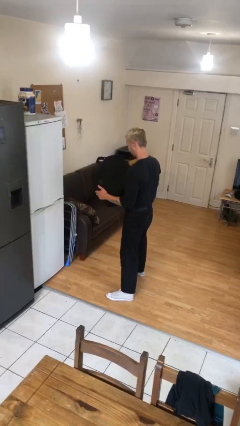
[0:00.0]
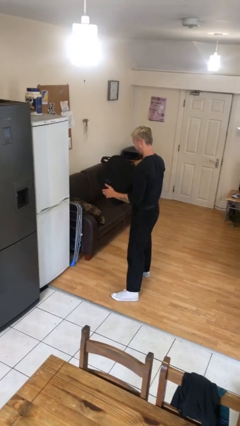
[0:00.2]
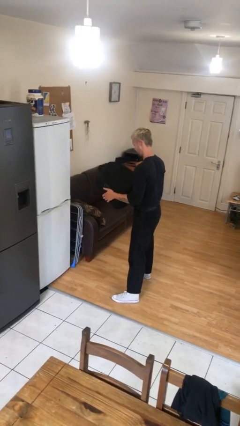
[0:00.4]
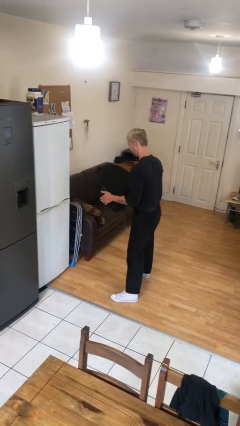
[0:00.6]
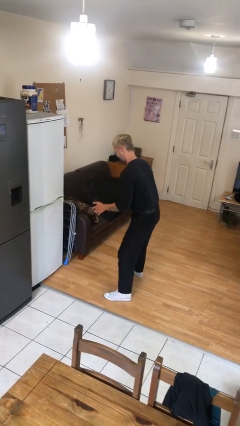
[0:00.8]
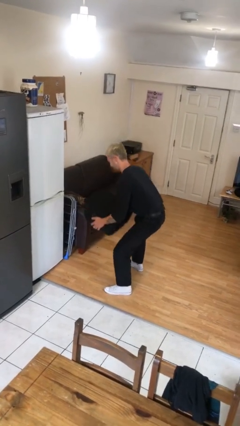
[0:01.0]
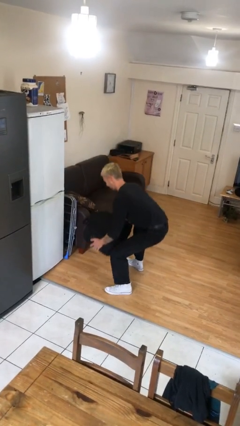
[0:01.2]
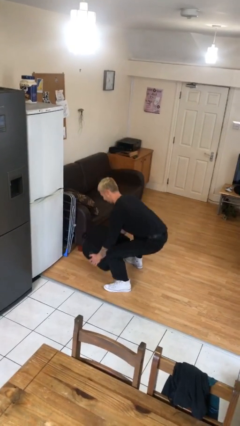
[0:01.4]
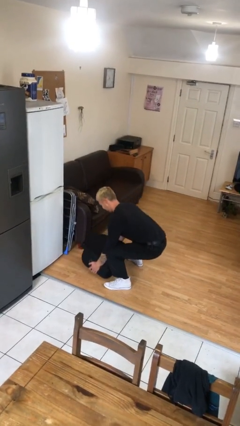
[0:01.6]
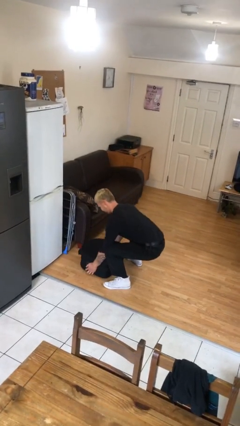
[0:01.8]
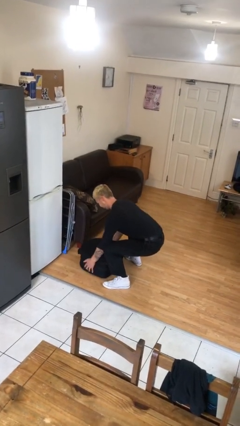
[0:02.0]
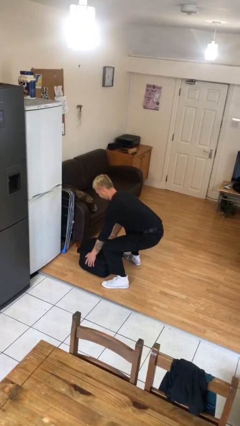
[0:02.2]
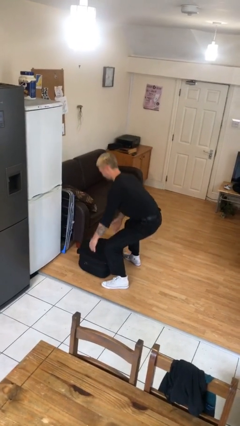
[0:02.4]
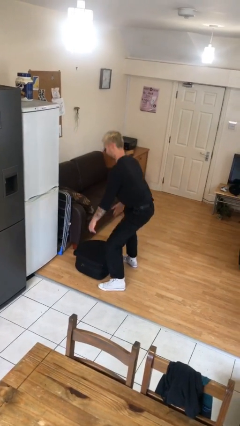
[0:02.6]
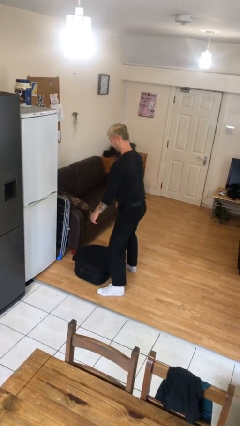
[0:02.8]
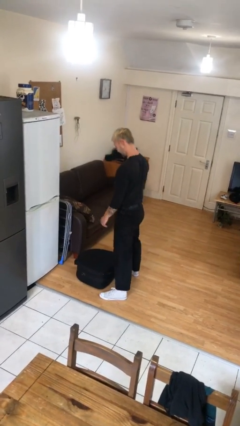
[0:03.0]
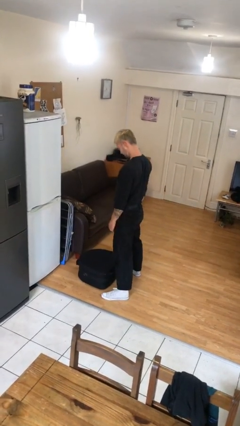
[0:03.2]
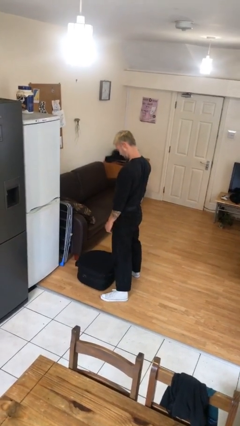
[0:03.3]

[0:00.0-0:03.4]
person puts down object on floor

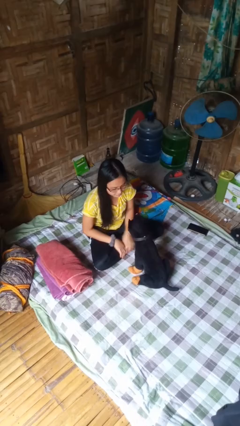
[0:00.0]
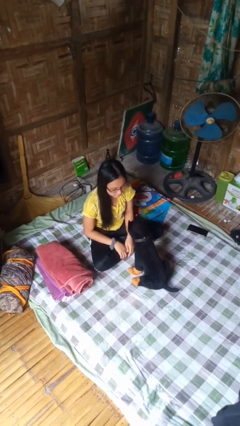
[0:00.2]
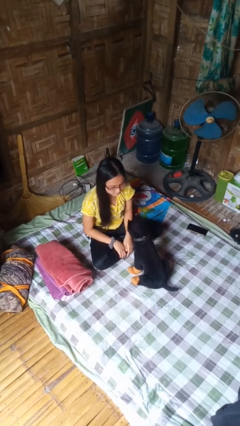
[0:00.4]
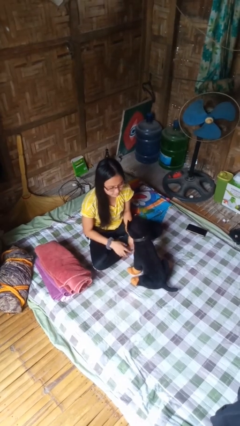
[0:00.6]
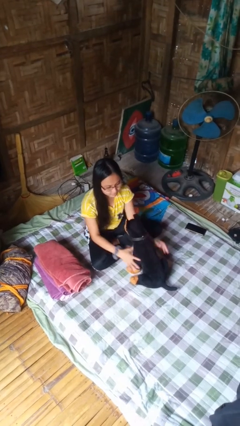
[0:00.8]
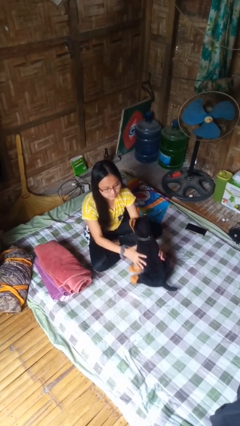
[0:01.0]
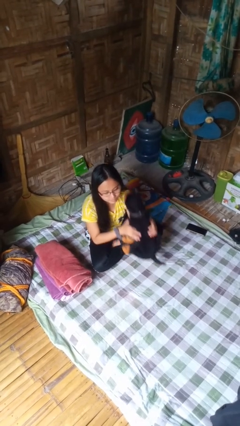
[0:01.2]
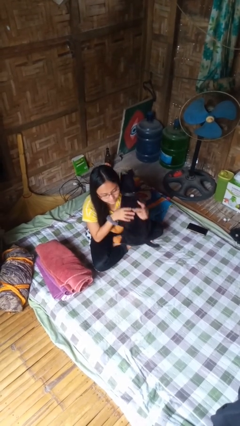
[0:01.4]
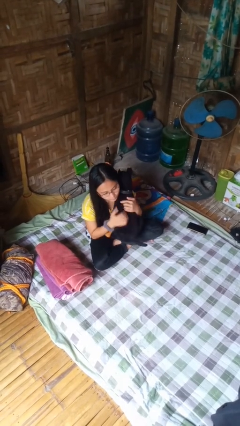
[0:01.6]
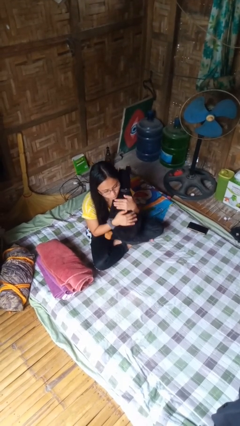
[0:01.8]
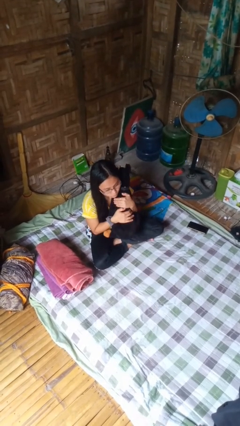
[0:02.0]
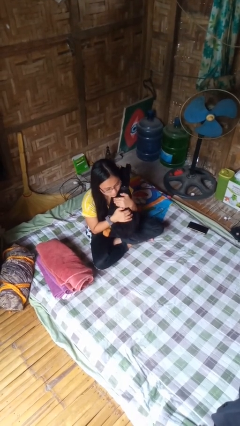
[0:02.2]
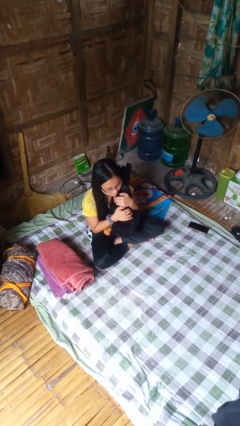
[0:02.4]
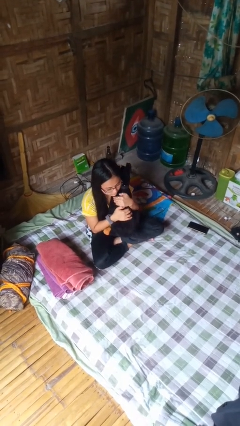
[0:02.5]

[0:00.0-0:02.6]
person hugs stuffed animal

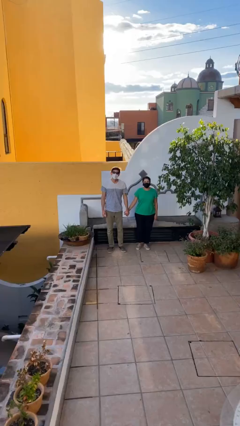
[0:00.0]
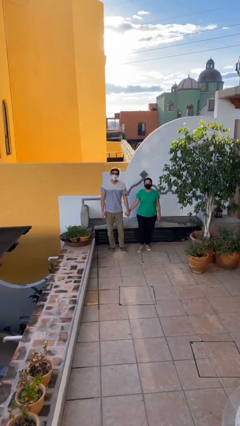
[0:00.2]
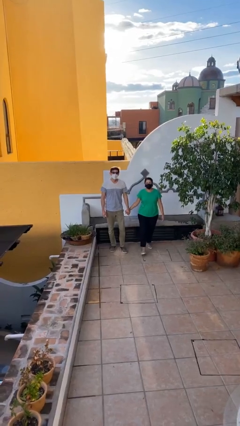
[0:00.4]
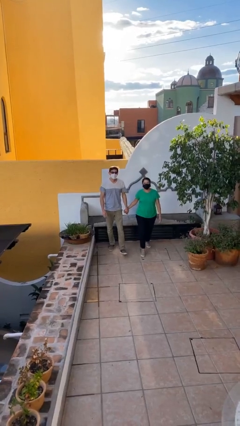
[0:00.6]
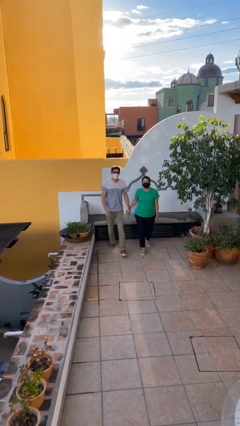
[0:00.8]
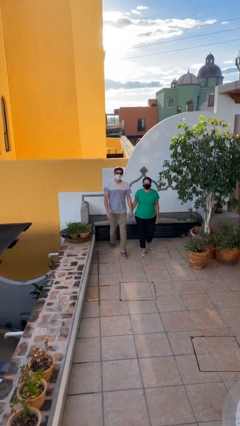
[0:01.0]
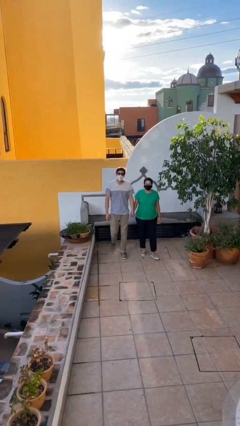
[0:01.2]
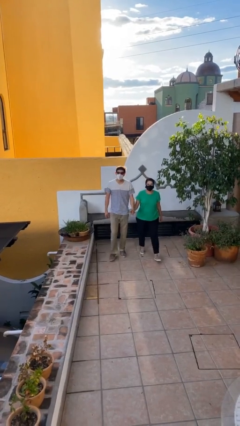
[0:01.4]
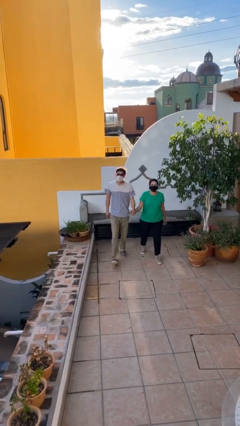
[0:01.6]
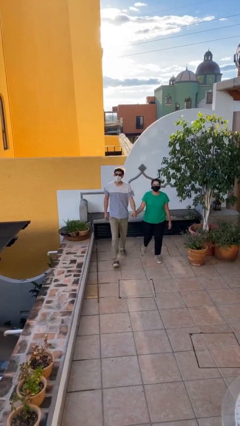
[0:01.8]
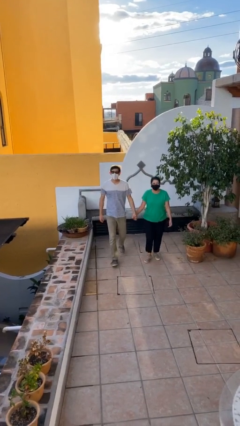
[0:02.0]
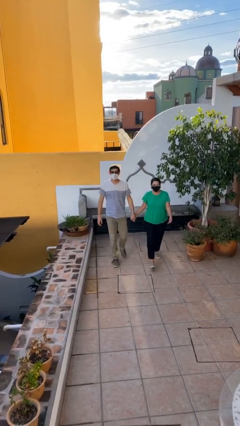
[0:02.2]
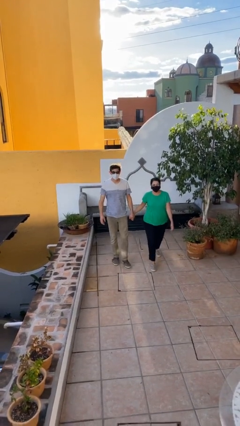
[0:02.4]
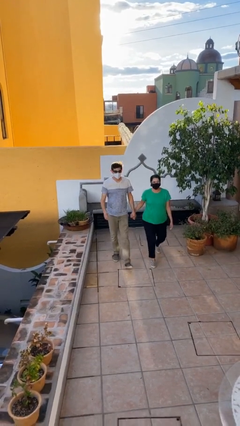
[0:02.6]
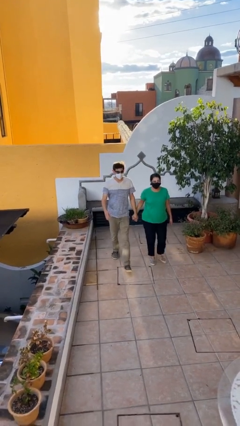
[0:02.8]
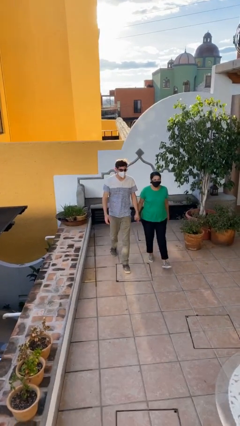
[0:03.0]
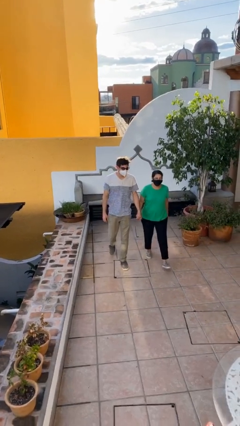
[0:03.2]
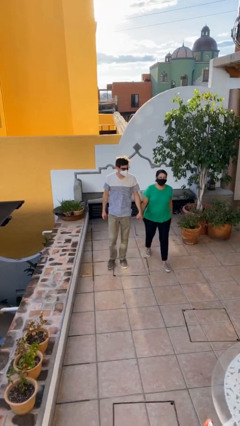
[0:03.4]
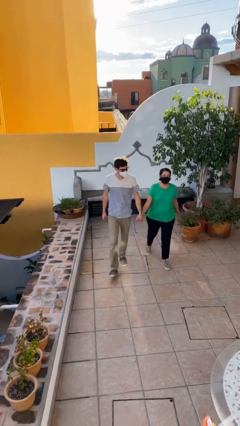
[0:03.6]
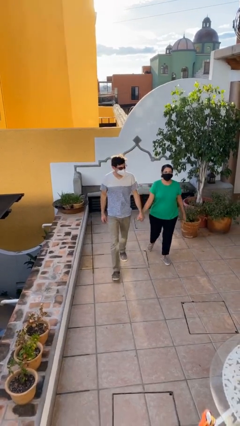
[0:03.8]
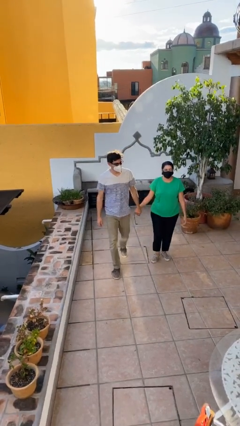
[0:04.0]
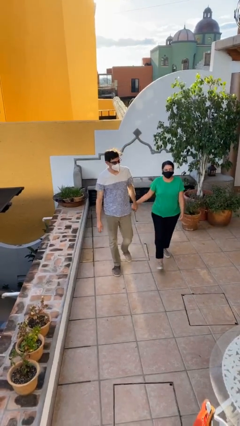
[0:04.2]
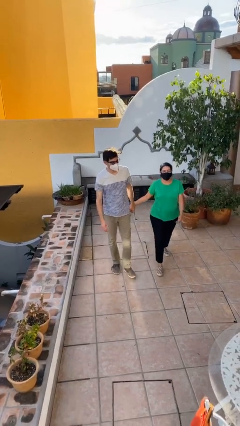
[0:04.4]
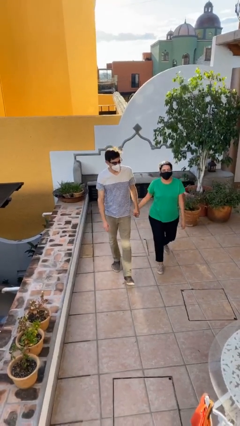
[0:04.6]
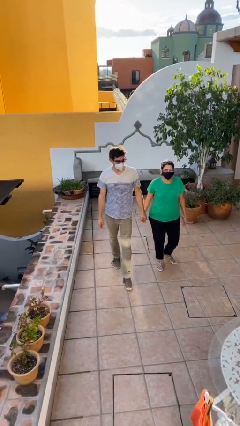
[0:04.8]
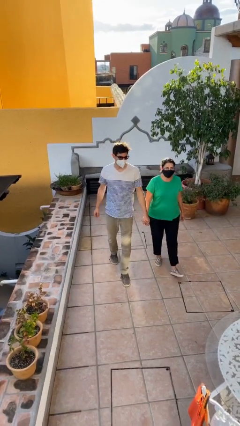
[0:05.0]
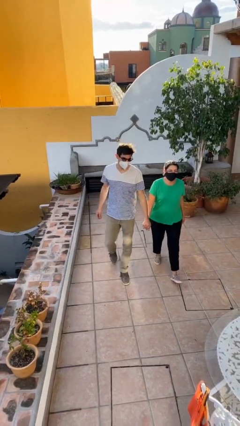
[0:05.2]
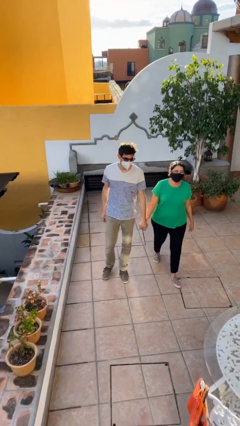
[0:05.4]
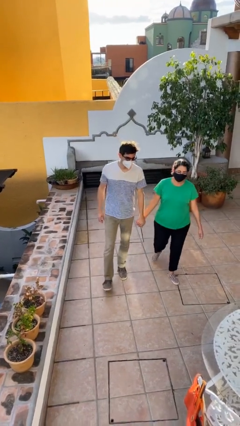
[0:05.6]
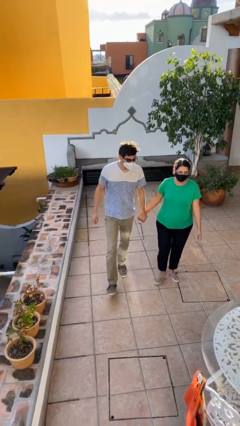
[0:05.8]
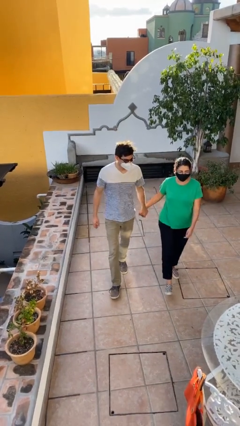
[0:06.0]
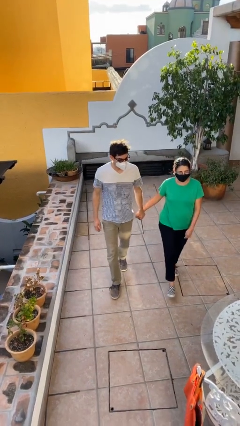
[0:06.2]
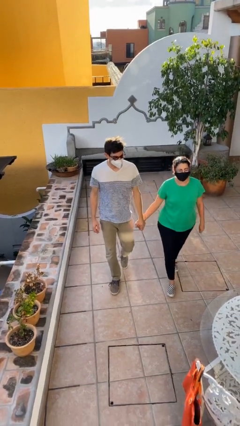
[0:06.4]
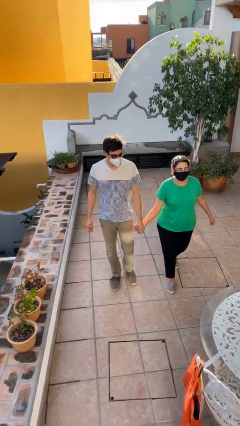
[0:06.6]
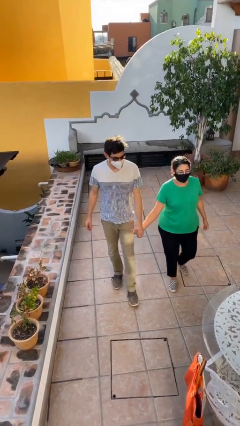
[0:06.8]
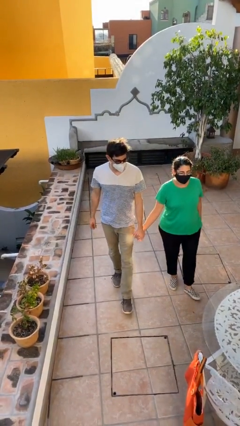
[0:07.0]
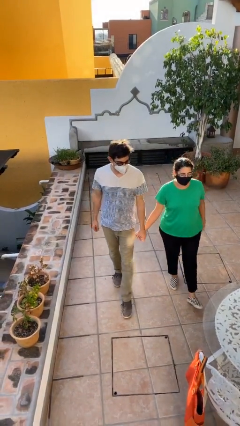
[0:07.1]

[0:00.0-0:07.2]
person holds hand

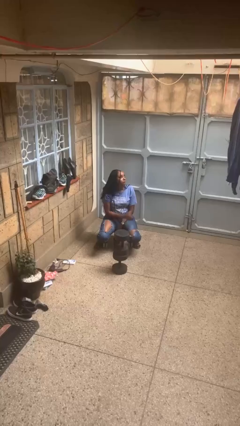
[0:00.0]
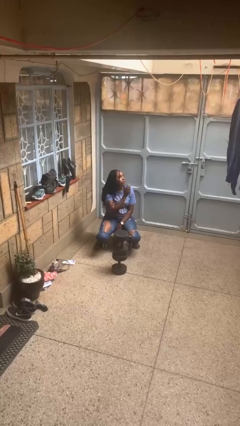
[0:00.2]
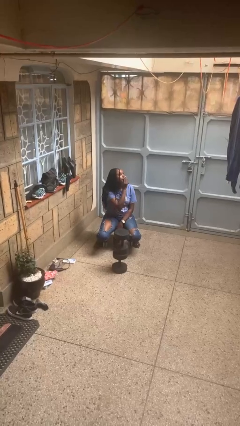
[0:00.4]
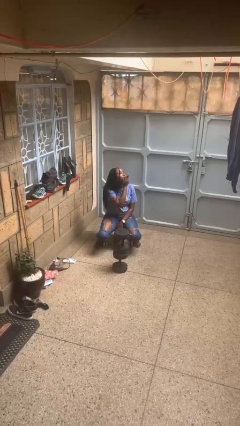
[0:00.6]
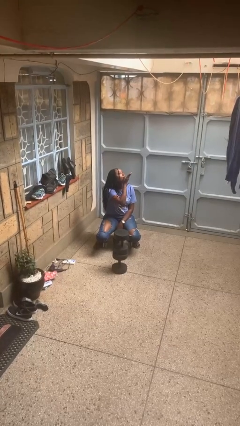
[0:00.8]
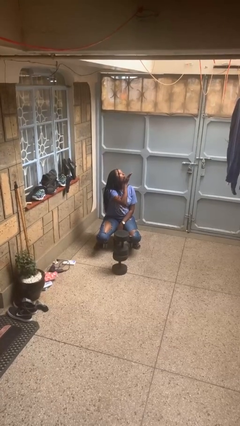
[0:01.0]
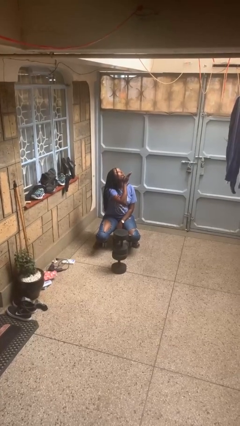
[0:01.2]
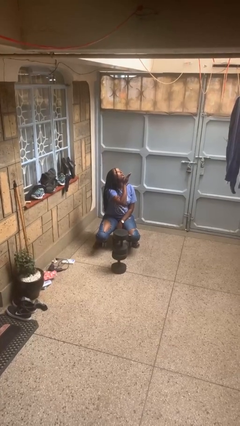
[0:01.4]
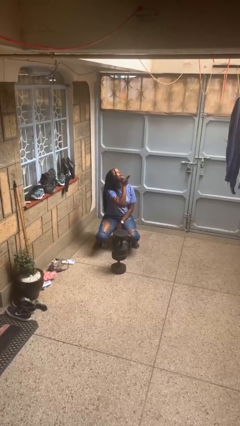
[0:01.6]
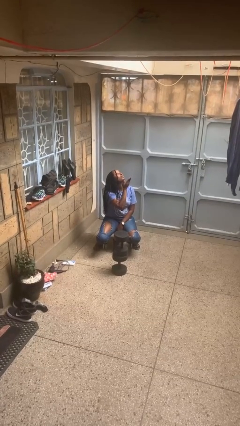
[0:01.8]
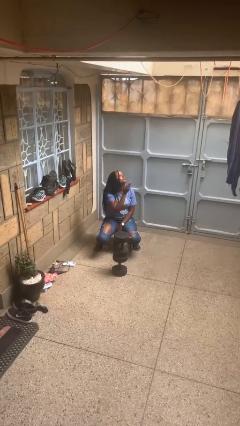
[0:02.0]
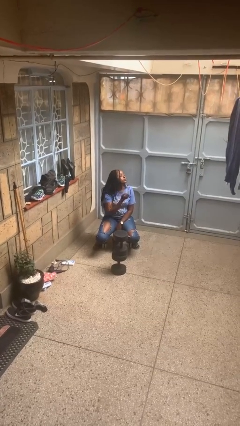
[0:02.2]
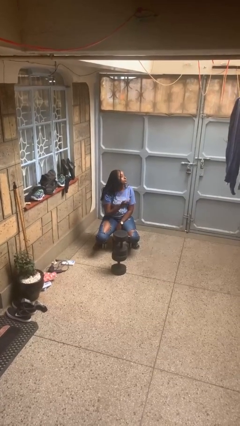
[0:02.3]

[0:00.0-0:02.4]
person gestures blow kiss

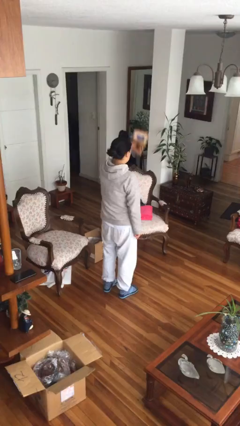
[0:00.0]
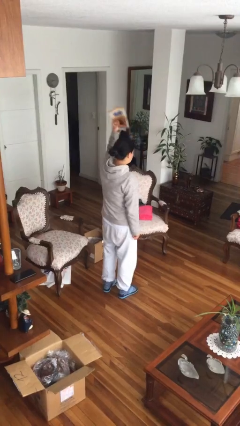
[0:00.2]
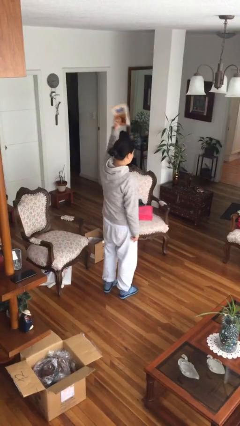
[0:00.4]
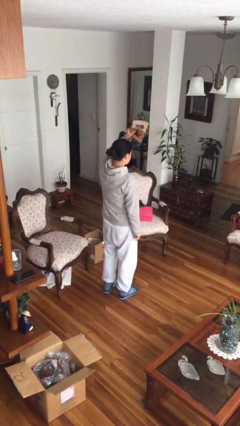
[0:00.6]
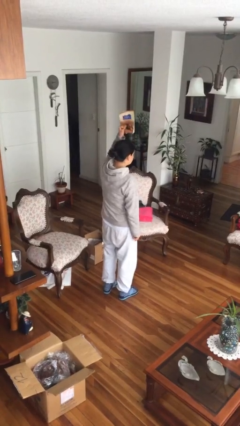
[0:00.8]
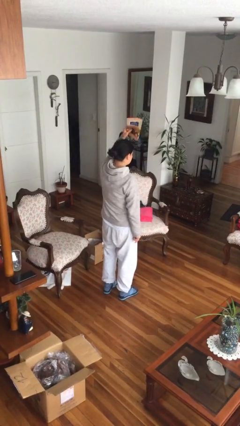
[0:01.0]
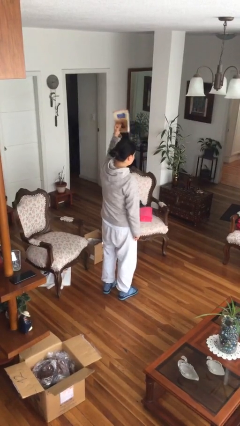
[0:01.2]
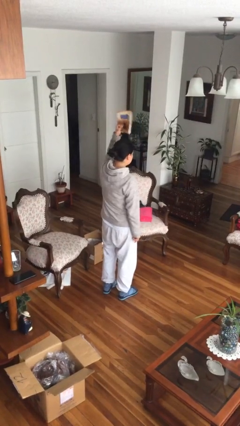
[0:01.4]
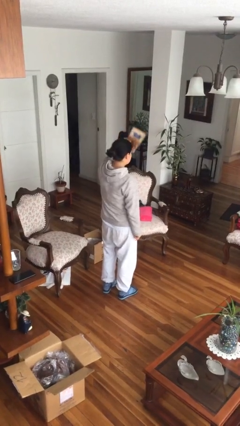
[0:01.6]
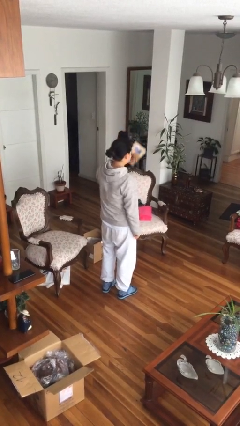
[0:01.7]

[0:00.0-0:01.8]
person holds object above head
